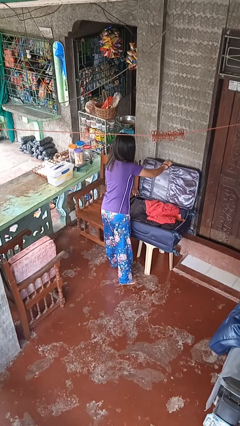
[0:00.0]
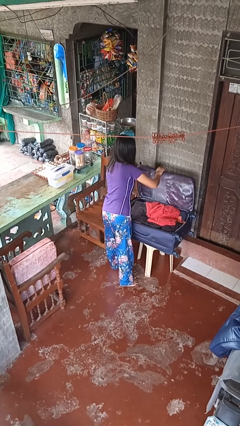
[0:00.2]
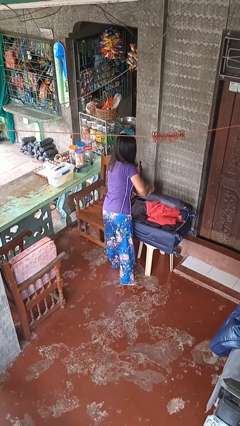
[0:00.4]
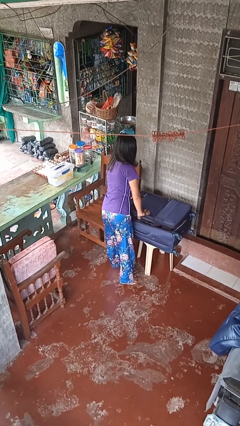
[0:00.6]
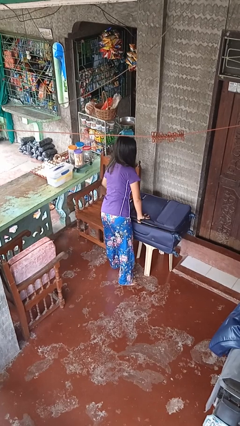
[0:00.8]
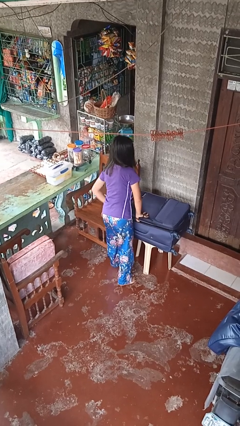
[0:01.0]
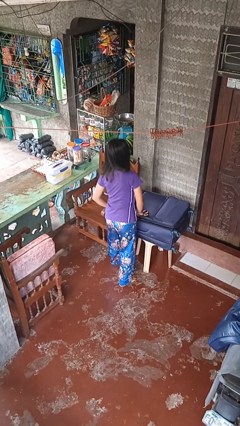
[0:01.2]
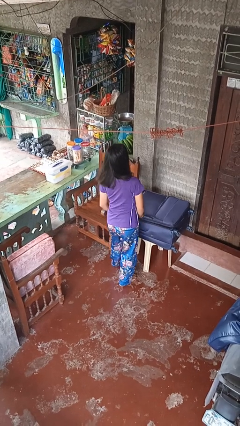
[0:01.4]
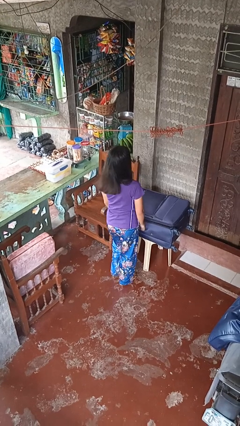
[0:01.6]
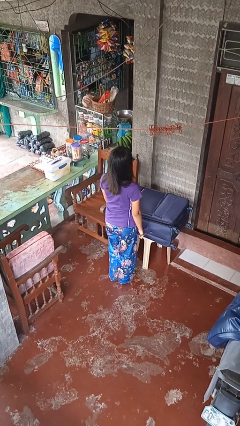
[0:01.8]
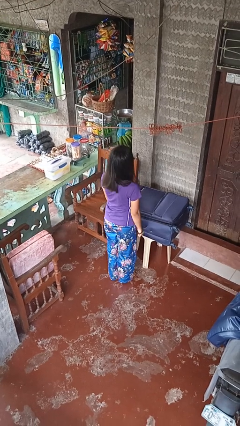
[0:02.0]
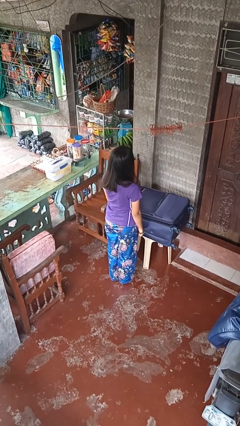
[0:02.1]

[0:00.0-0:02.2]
person closes suitcase

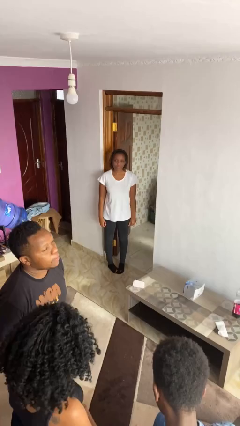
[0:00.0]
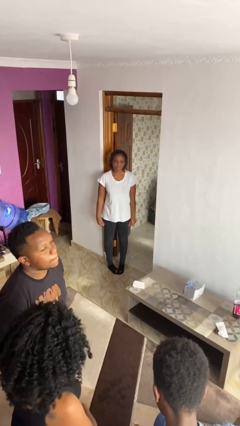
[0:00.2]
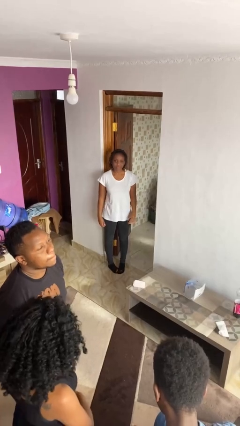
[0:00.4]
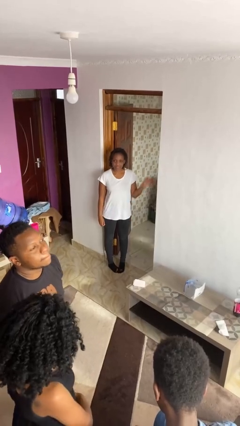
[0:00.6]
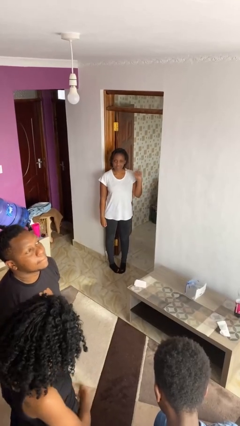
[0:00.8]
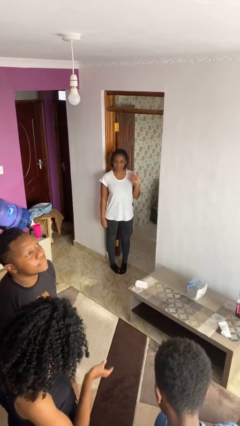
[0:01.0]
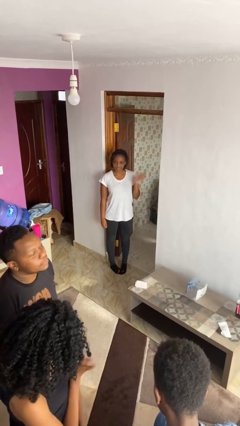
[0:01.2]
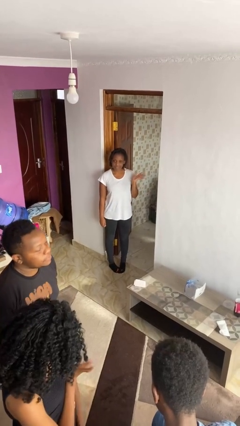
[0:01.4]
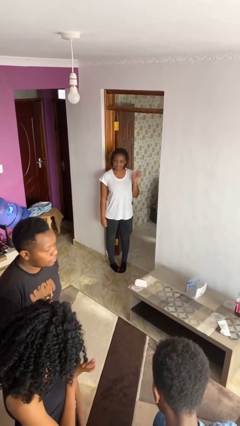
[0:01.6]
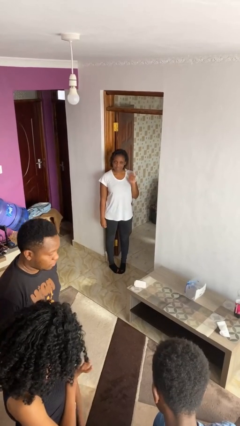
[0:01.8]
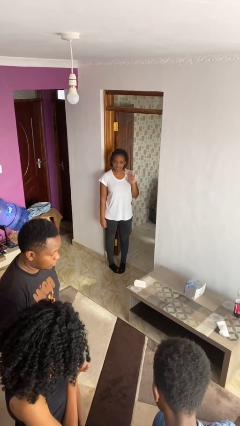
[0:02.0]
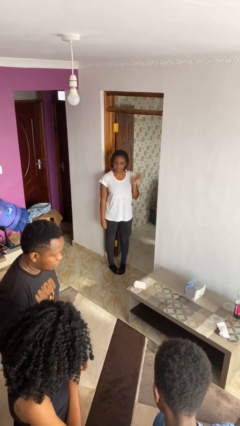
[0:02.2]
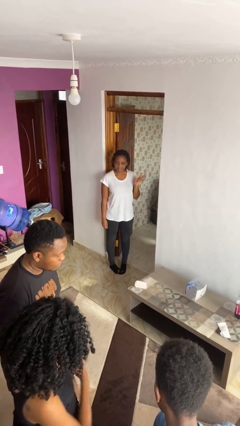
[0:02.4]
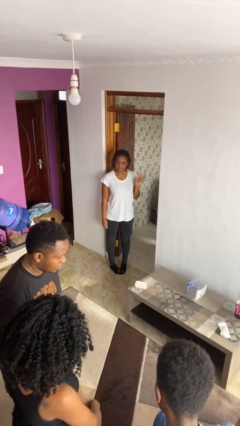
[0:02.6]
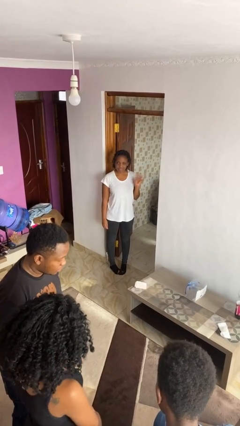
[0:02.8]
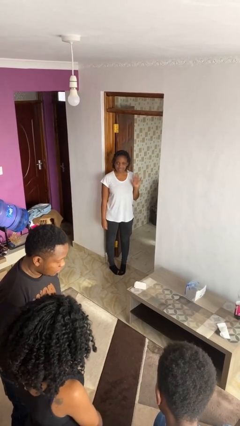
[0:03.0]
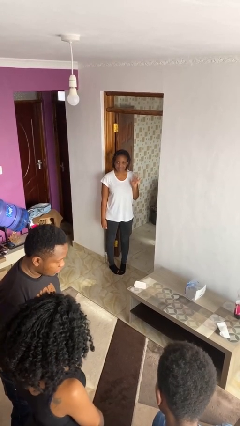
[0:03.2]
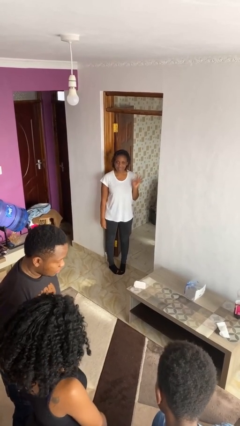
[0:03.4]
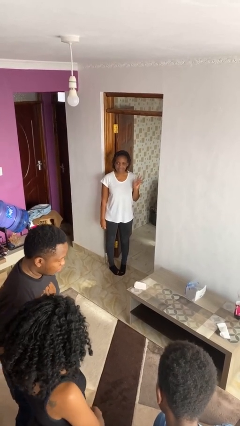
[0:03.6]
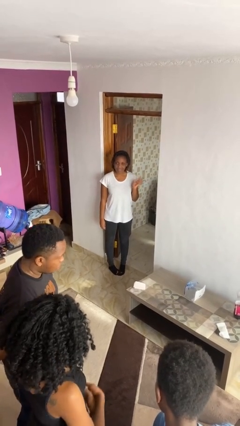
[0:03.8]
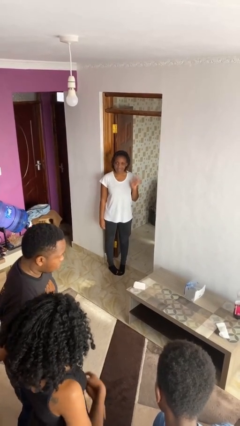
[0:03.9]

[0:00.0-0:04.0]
person waves at person

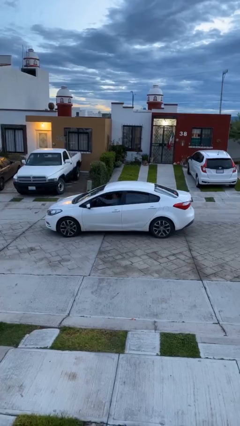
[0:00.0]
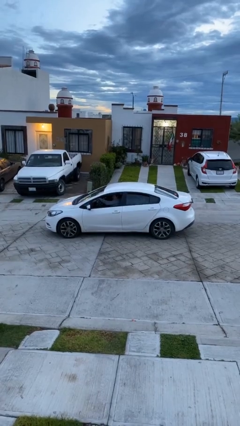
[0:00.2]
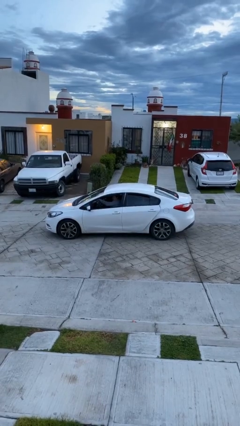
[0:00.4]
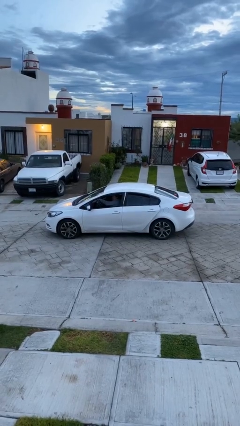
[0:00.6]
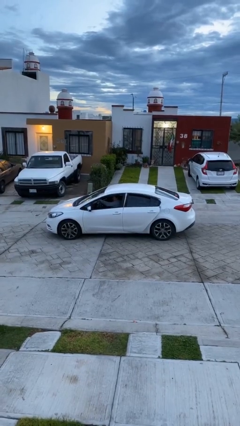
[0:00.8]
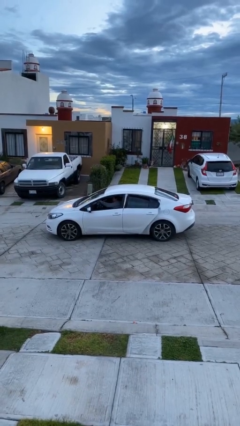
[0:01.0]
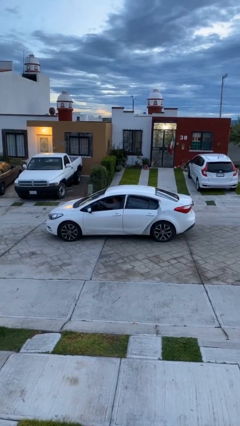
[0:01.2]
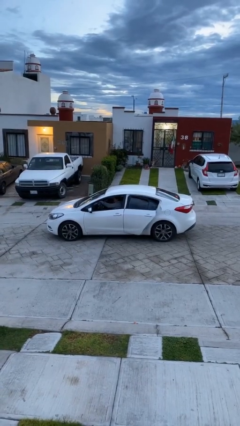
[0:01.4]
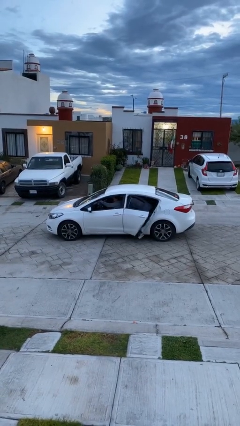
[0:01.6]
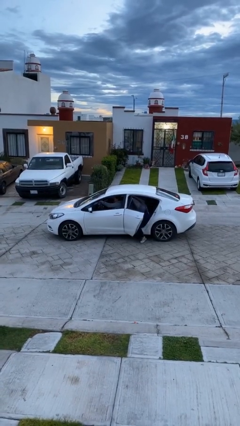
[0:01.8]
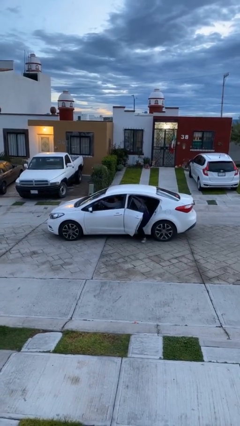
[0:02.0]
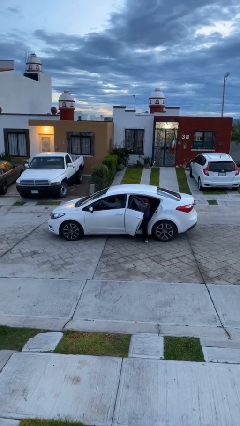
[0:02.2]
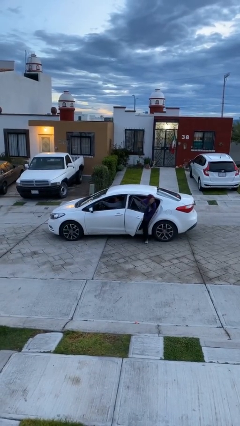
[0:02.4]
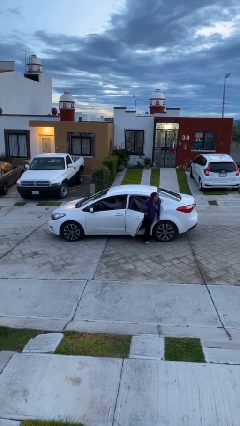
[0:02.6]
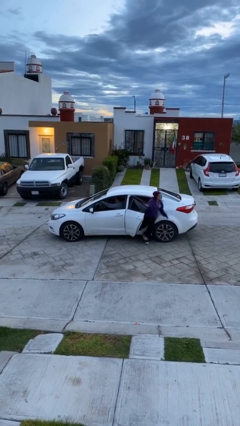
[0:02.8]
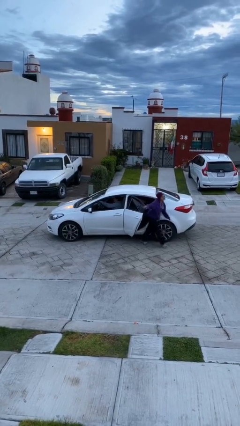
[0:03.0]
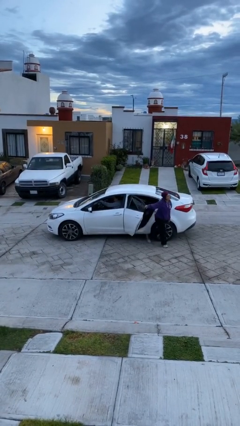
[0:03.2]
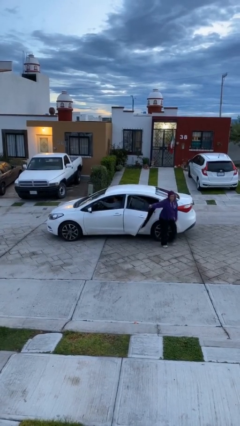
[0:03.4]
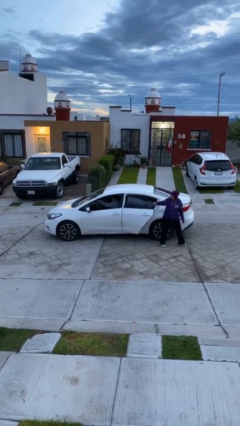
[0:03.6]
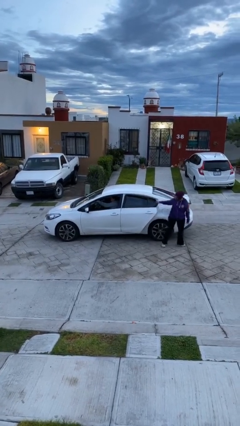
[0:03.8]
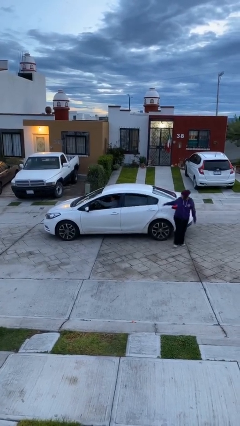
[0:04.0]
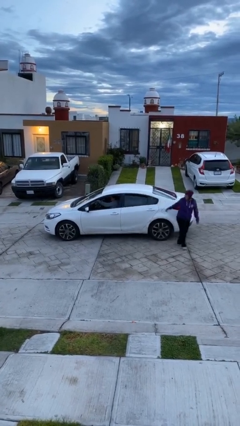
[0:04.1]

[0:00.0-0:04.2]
car drops off person

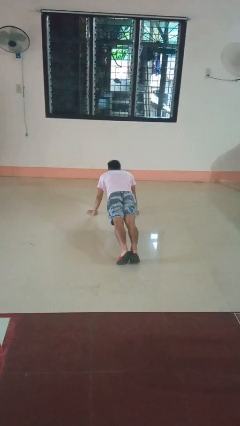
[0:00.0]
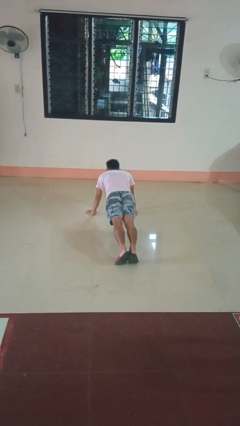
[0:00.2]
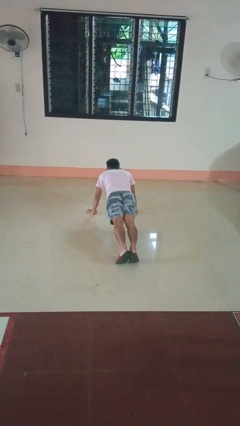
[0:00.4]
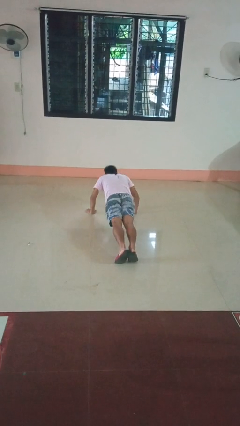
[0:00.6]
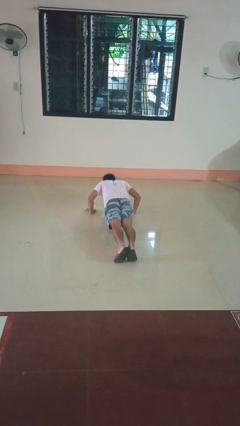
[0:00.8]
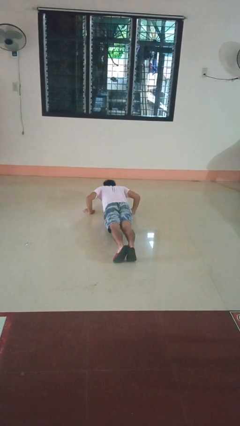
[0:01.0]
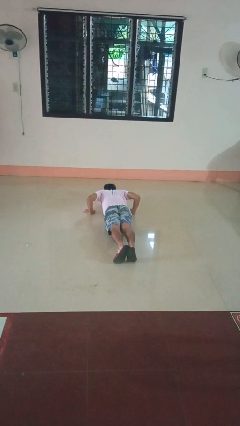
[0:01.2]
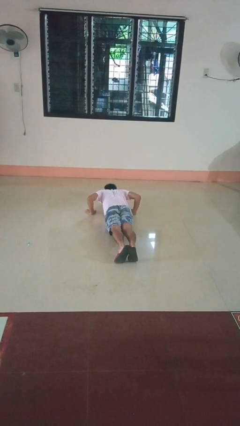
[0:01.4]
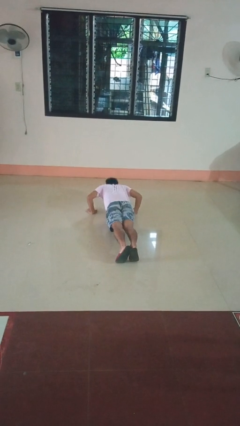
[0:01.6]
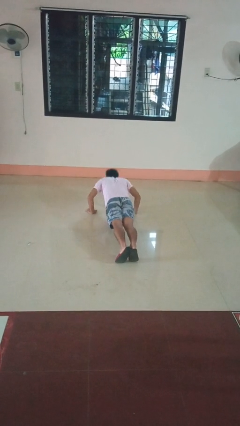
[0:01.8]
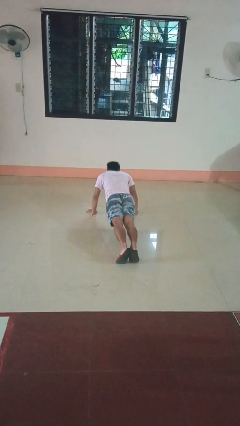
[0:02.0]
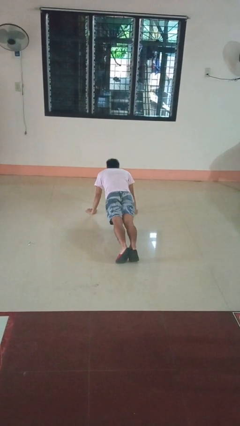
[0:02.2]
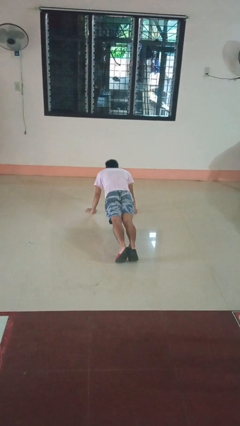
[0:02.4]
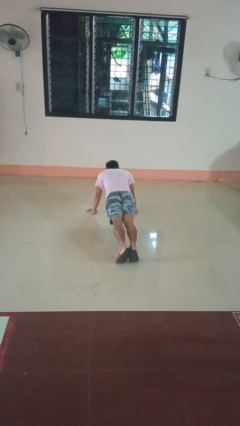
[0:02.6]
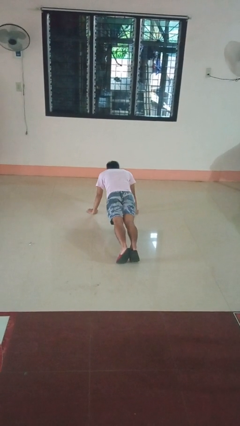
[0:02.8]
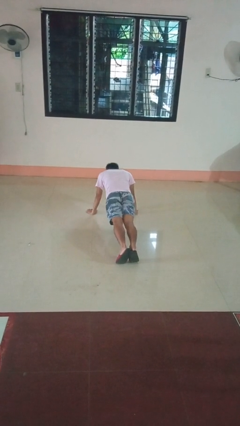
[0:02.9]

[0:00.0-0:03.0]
person exercises with pushup

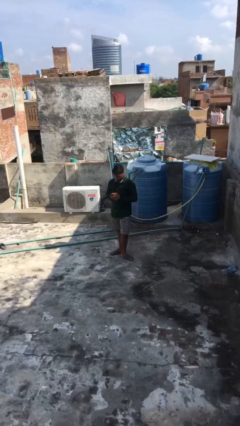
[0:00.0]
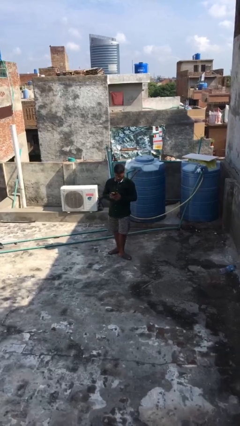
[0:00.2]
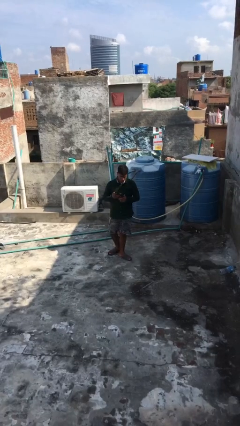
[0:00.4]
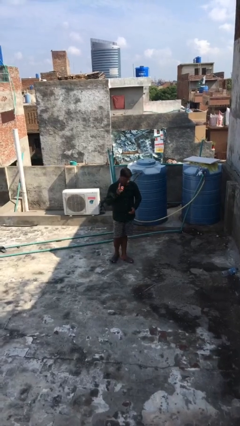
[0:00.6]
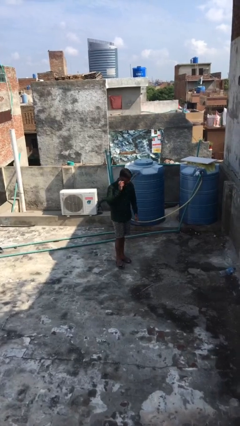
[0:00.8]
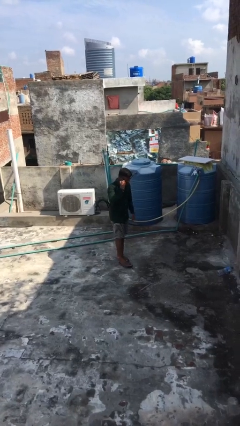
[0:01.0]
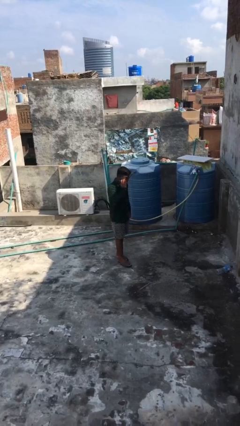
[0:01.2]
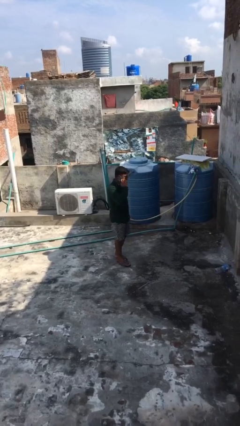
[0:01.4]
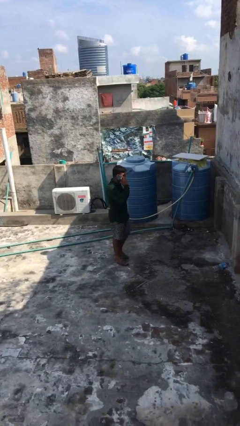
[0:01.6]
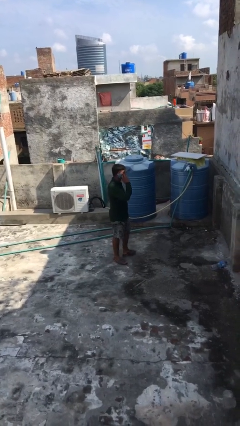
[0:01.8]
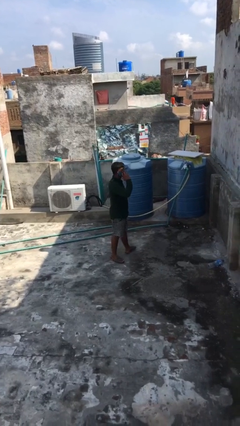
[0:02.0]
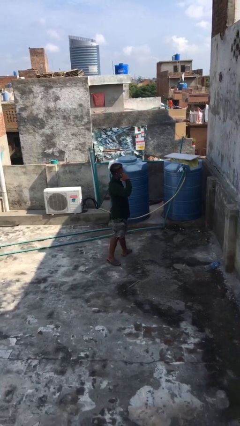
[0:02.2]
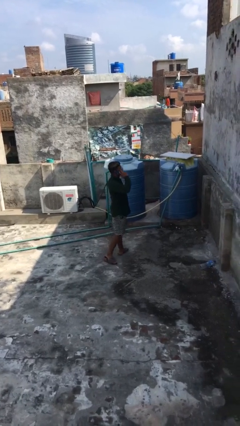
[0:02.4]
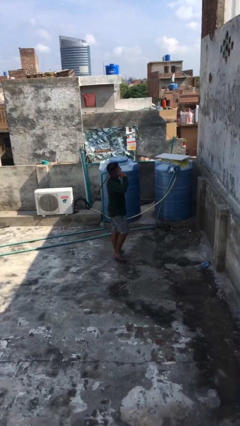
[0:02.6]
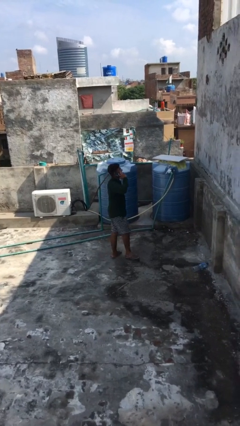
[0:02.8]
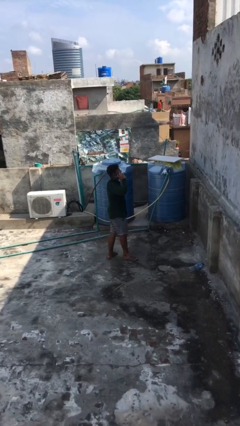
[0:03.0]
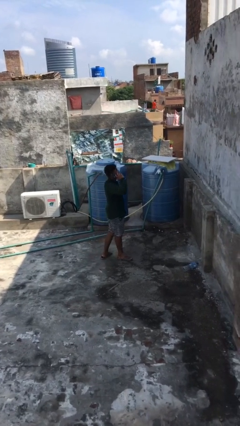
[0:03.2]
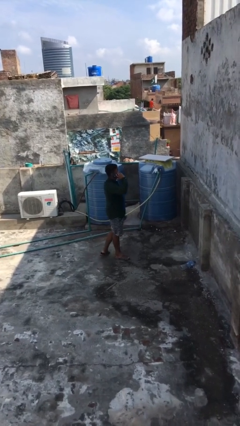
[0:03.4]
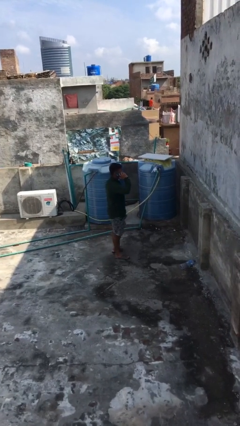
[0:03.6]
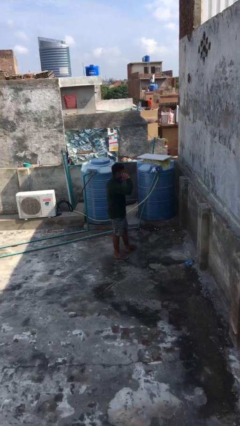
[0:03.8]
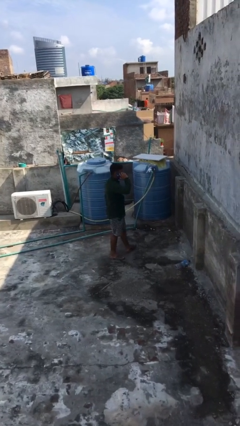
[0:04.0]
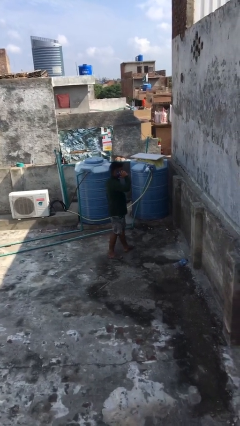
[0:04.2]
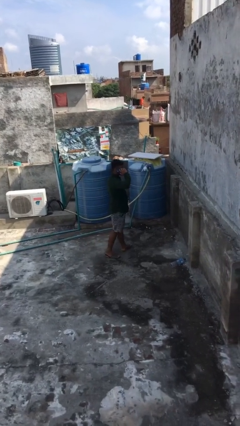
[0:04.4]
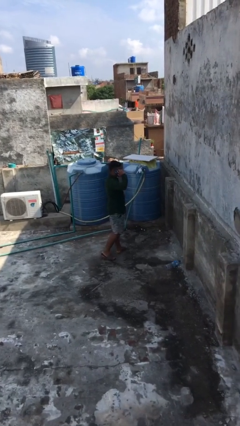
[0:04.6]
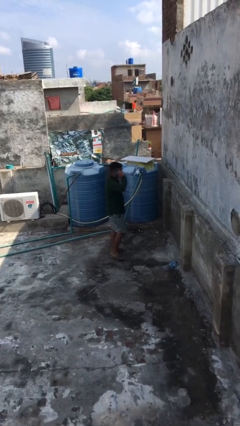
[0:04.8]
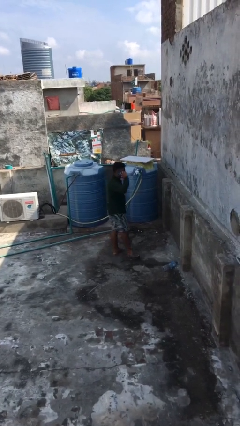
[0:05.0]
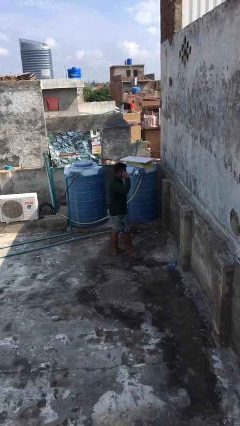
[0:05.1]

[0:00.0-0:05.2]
person talks on phone
